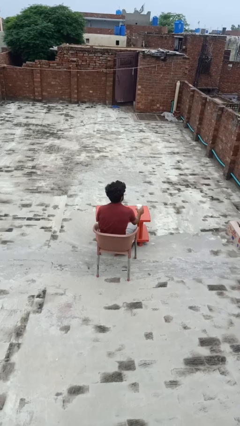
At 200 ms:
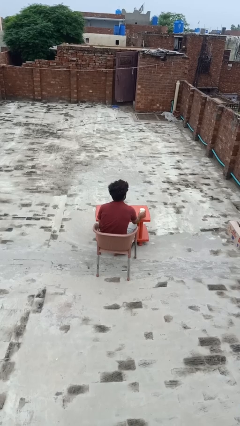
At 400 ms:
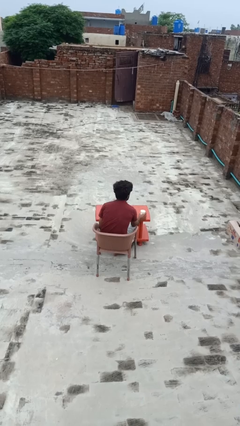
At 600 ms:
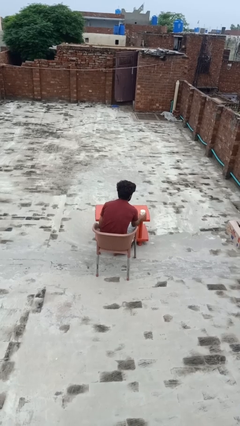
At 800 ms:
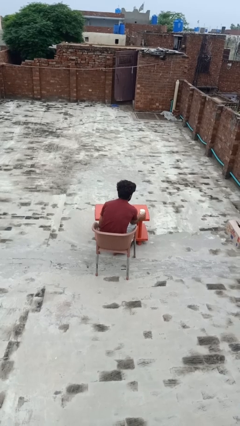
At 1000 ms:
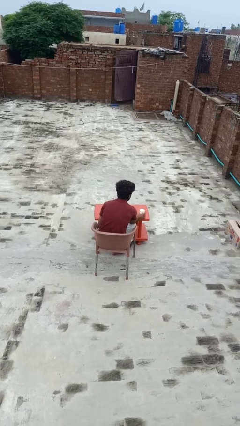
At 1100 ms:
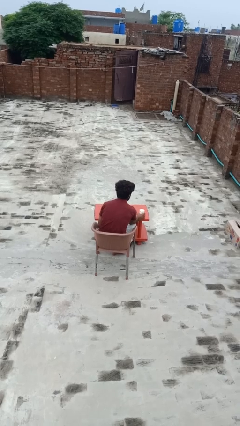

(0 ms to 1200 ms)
person drinks from mug

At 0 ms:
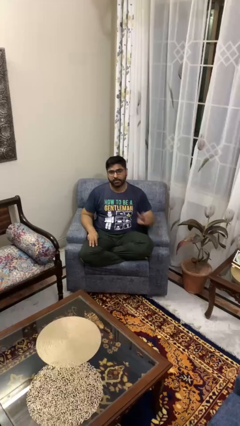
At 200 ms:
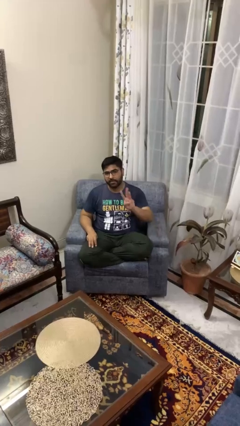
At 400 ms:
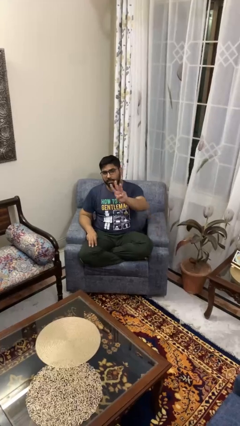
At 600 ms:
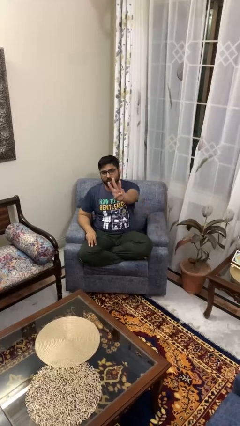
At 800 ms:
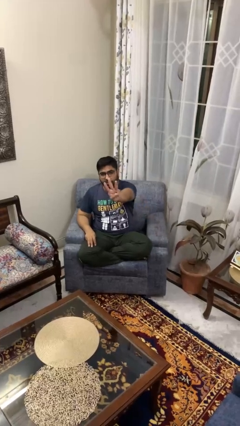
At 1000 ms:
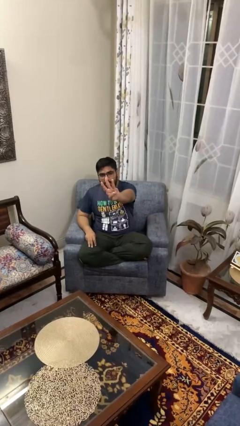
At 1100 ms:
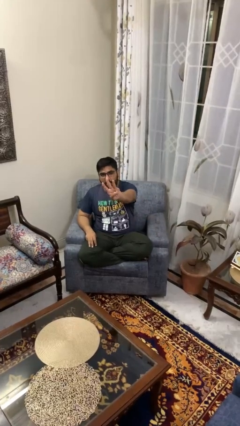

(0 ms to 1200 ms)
person gestures number three

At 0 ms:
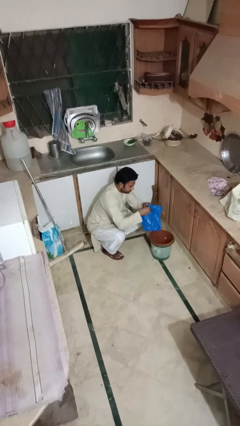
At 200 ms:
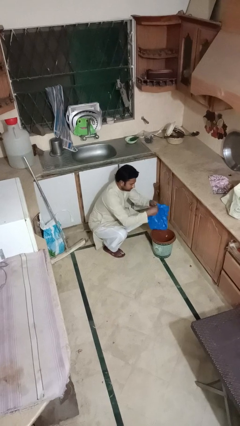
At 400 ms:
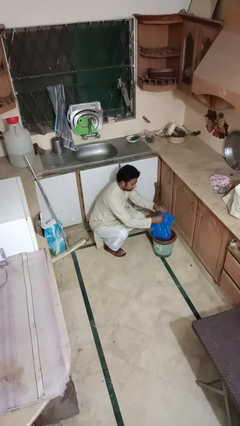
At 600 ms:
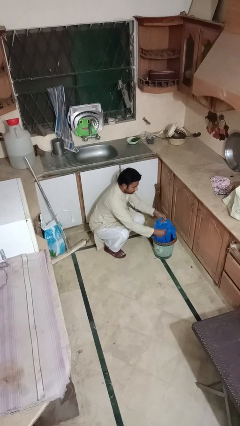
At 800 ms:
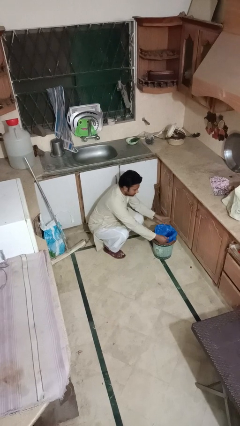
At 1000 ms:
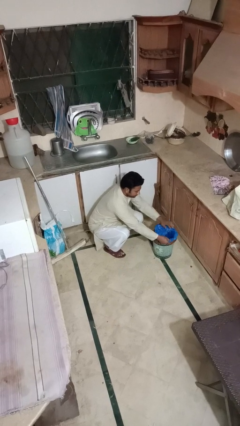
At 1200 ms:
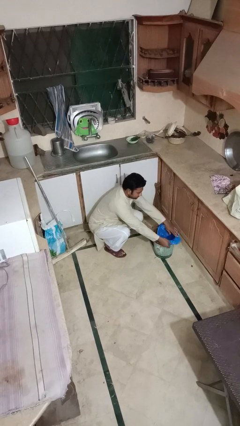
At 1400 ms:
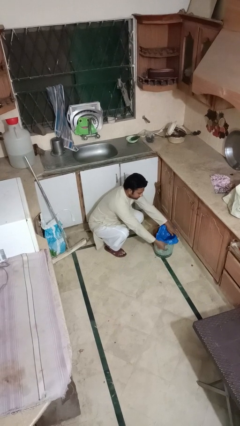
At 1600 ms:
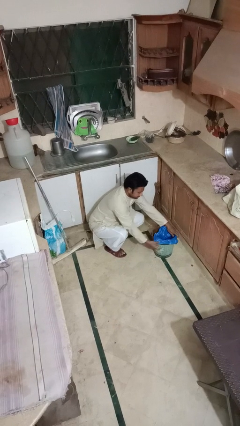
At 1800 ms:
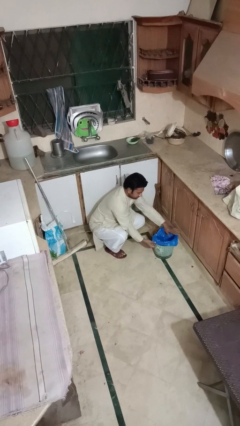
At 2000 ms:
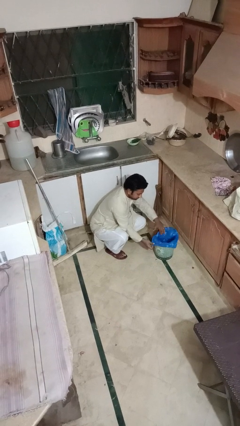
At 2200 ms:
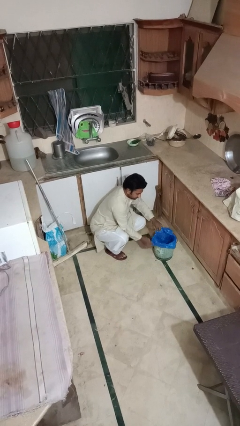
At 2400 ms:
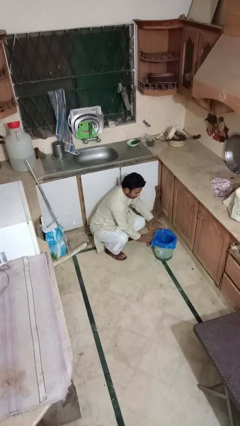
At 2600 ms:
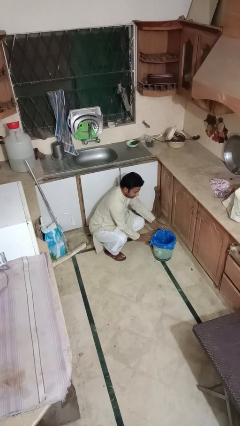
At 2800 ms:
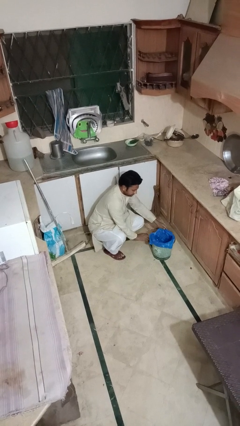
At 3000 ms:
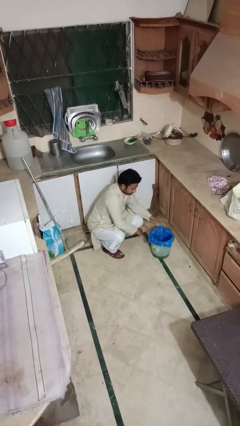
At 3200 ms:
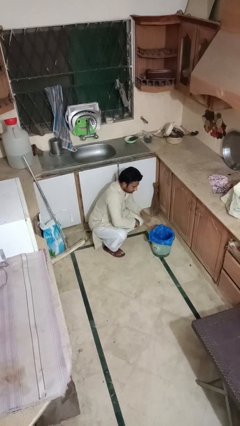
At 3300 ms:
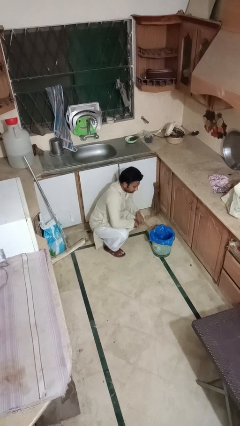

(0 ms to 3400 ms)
person inserts trashbag into trashcan

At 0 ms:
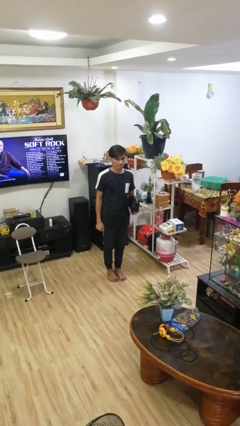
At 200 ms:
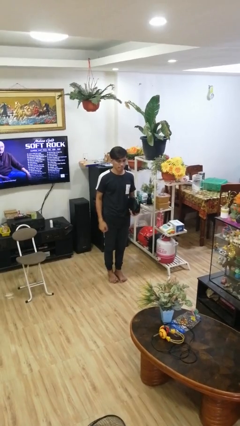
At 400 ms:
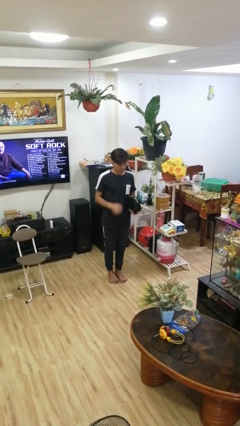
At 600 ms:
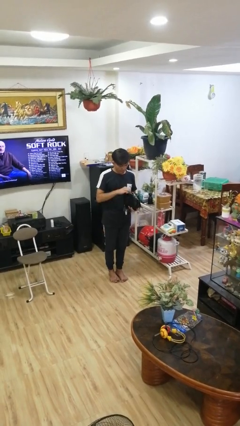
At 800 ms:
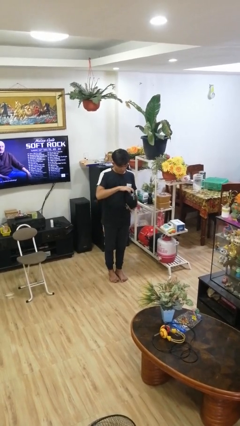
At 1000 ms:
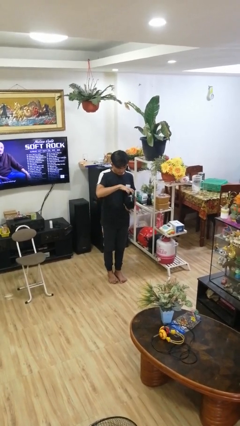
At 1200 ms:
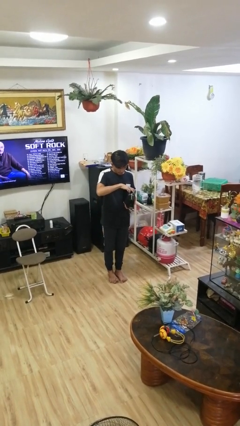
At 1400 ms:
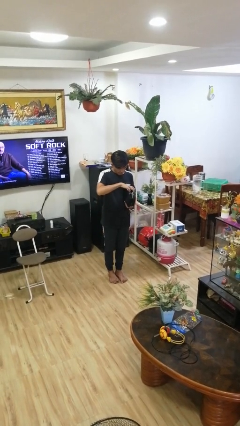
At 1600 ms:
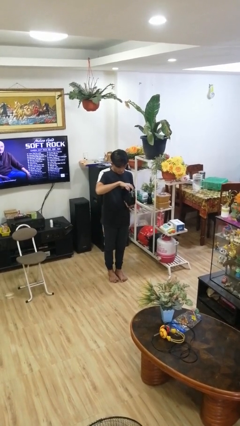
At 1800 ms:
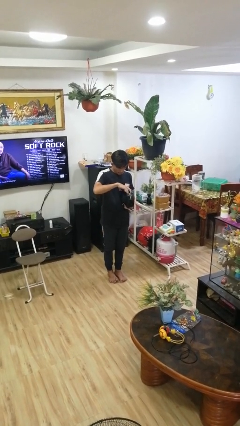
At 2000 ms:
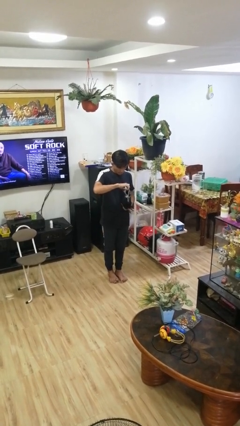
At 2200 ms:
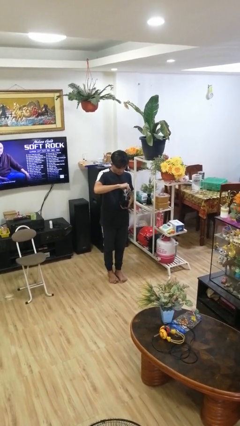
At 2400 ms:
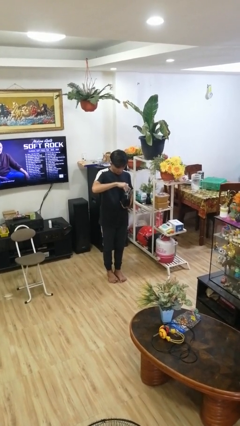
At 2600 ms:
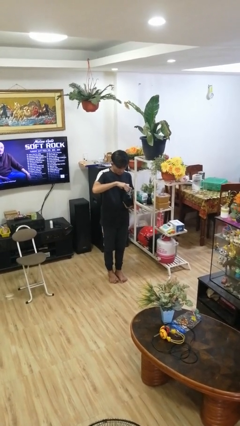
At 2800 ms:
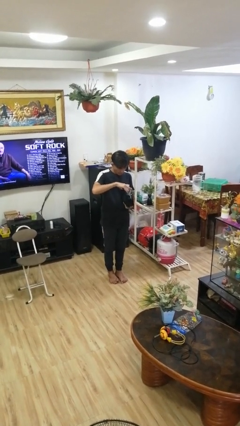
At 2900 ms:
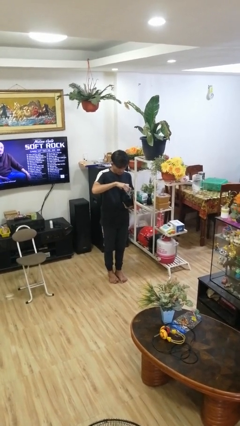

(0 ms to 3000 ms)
person searches in purse

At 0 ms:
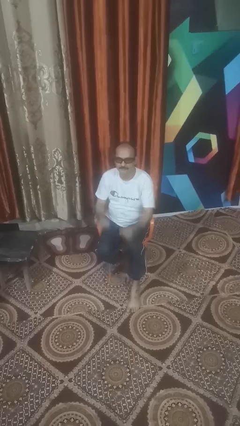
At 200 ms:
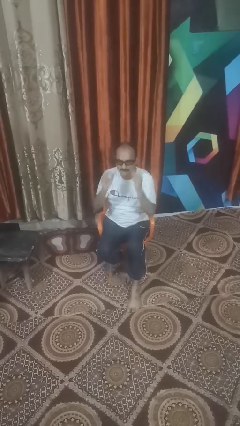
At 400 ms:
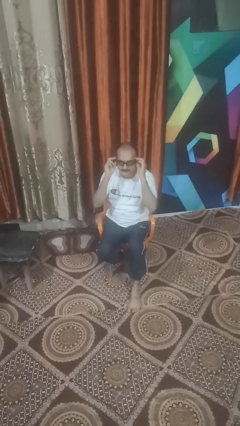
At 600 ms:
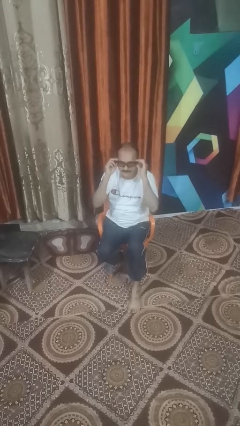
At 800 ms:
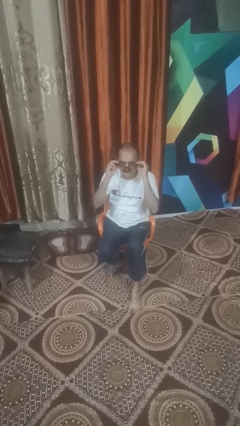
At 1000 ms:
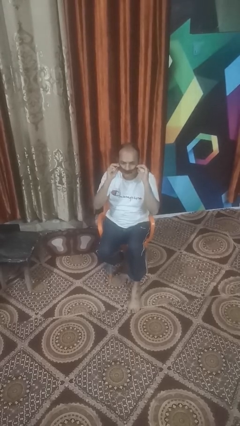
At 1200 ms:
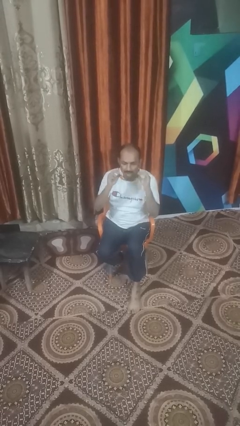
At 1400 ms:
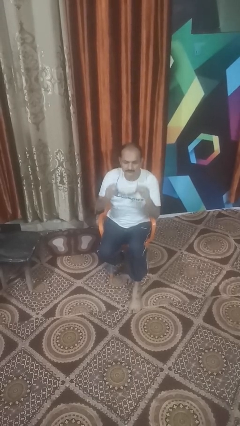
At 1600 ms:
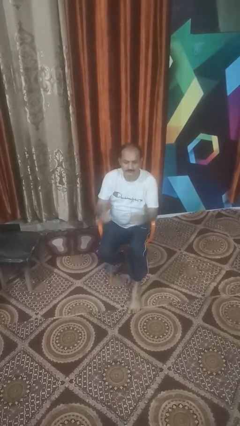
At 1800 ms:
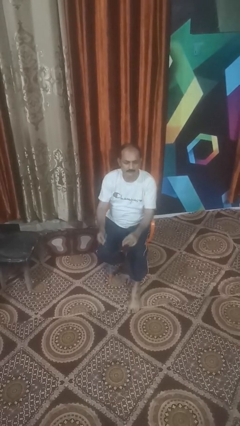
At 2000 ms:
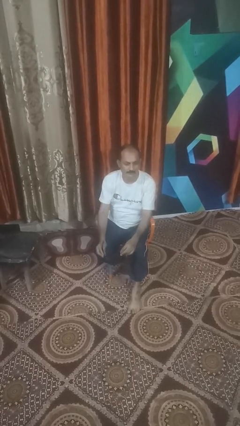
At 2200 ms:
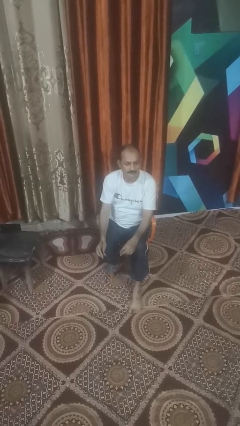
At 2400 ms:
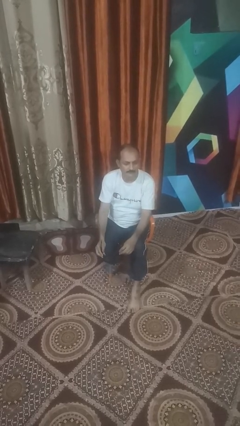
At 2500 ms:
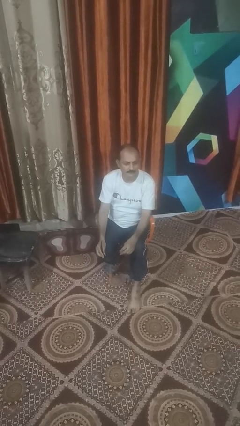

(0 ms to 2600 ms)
person takes off sunglasses

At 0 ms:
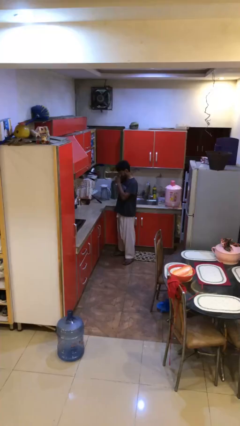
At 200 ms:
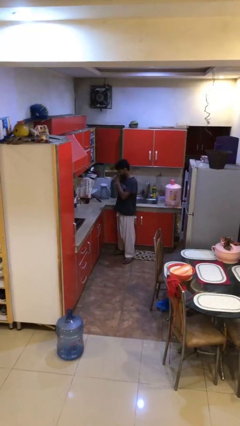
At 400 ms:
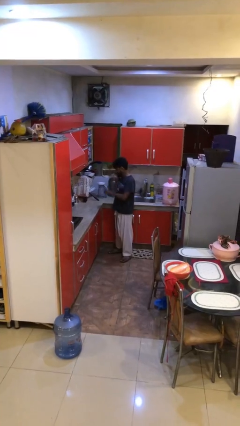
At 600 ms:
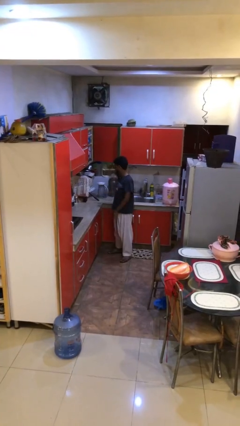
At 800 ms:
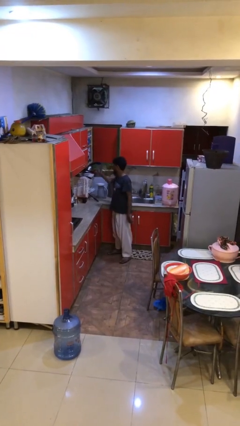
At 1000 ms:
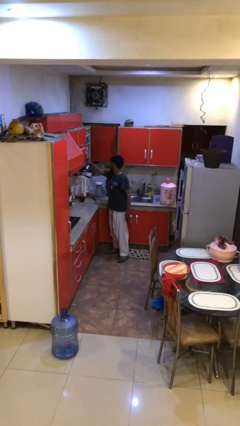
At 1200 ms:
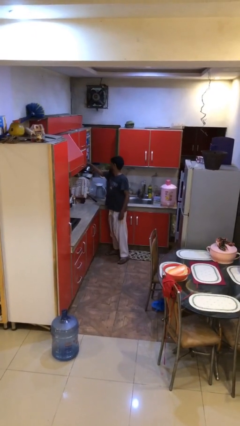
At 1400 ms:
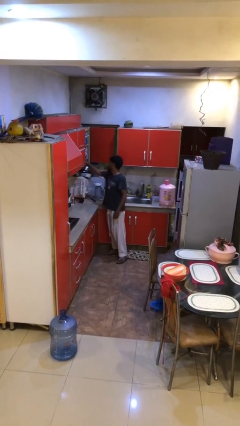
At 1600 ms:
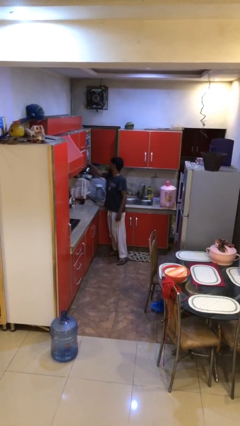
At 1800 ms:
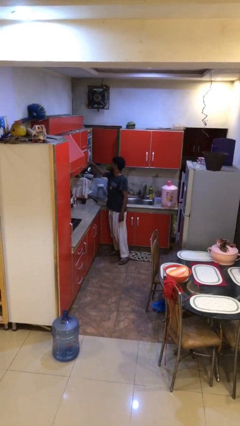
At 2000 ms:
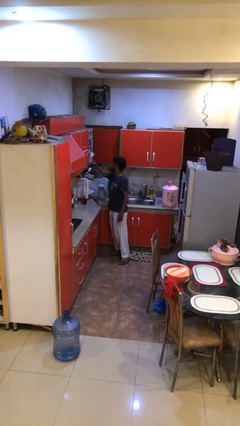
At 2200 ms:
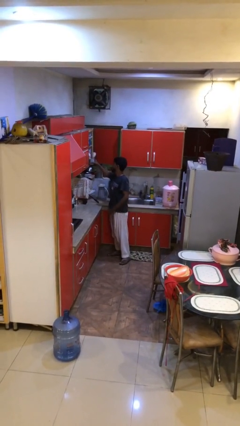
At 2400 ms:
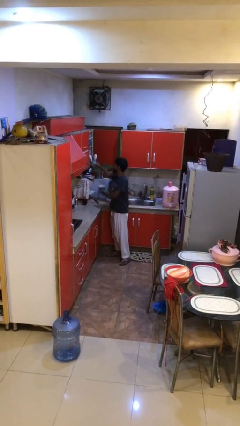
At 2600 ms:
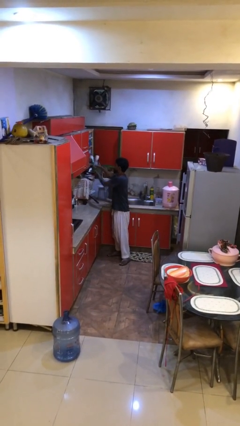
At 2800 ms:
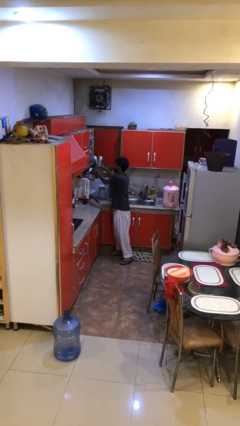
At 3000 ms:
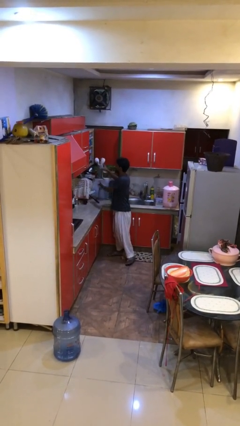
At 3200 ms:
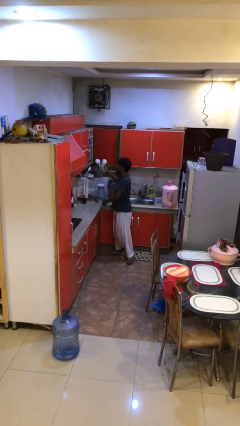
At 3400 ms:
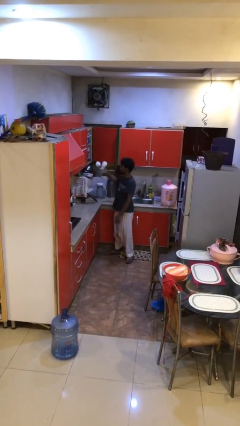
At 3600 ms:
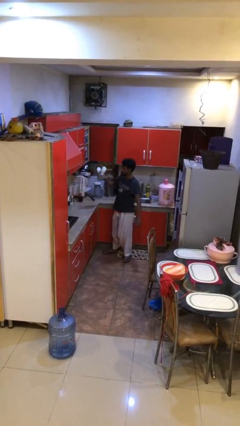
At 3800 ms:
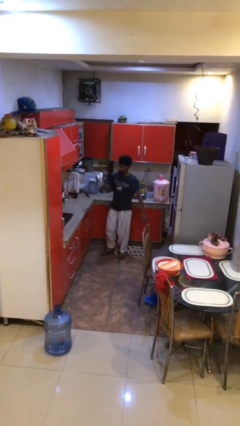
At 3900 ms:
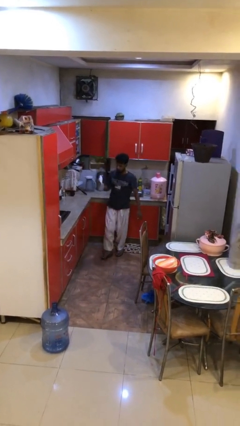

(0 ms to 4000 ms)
person picks up object from shelf

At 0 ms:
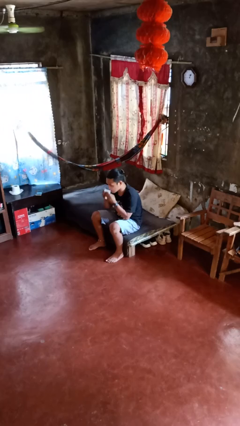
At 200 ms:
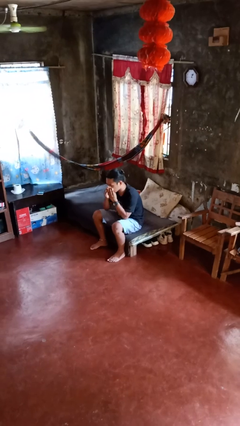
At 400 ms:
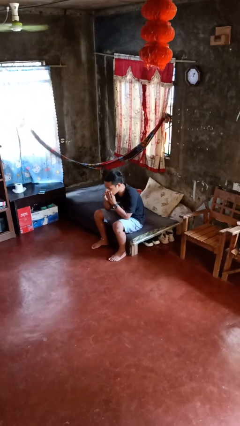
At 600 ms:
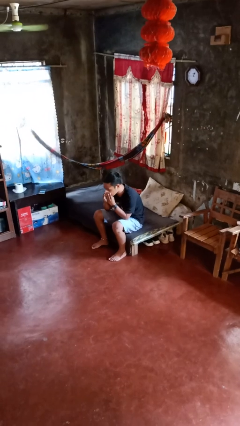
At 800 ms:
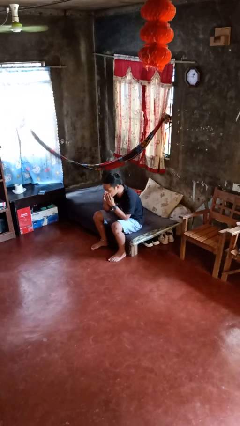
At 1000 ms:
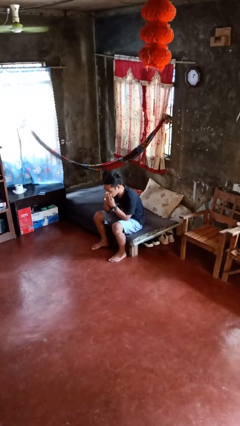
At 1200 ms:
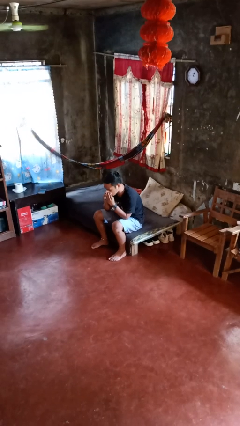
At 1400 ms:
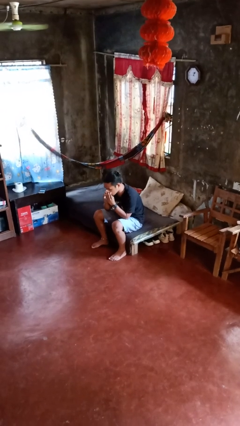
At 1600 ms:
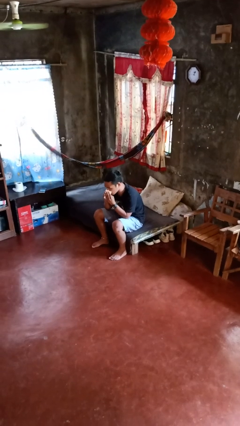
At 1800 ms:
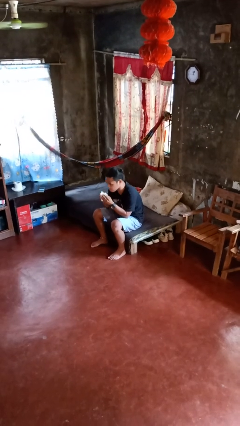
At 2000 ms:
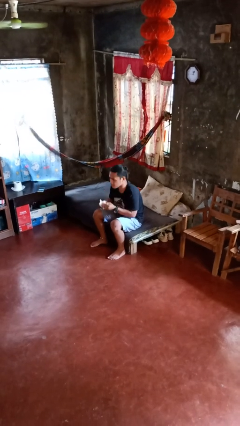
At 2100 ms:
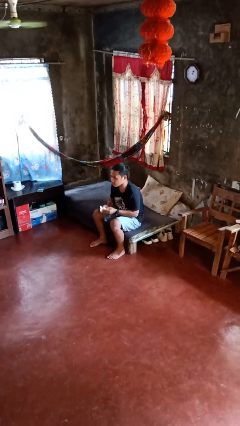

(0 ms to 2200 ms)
person blows nose
